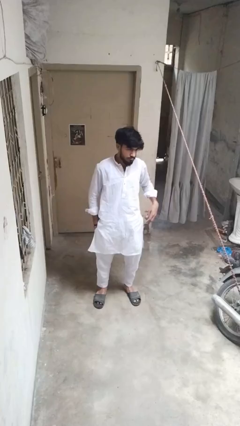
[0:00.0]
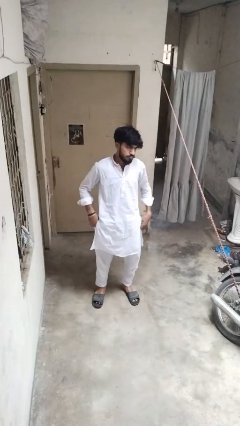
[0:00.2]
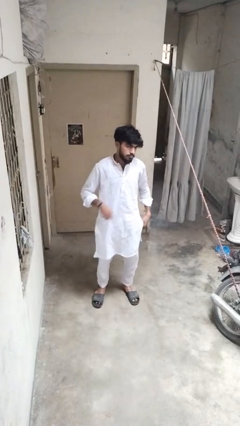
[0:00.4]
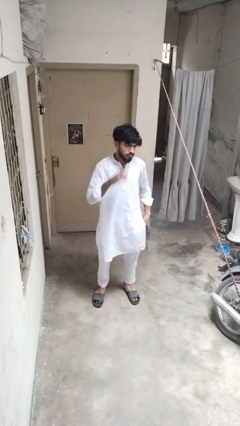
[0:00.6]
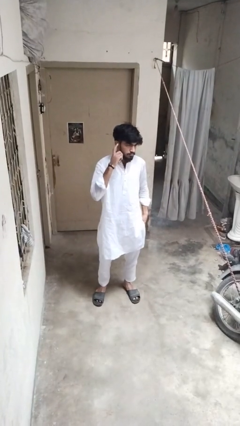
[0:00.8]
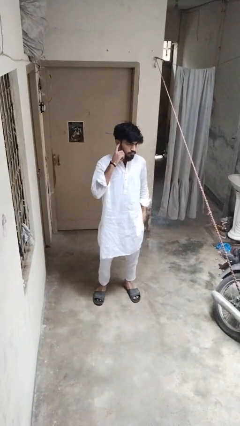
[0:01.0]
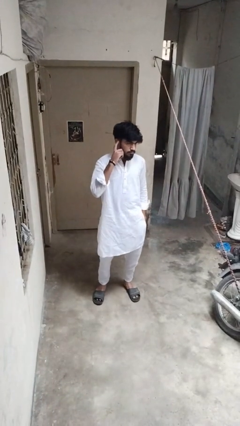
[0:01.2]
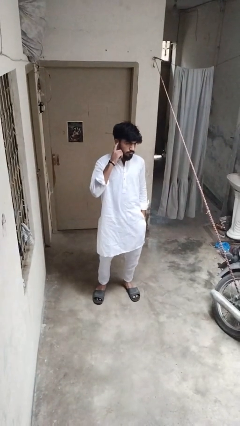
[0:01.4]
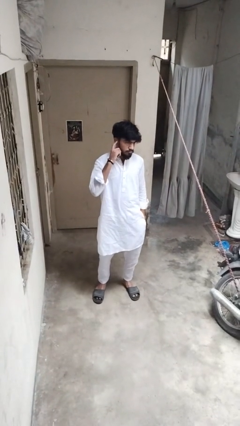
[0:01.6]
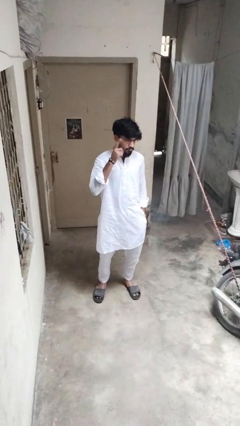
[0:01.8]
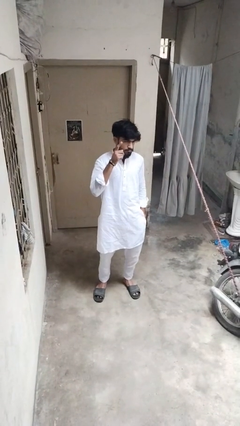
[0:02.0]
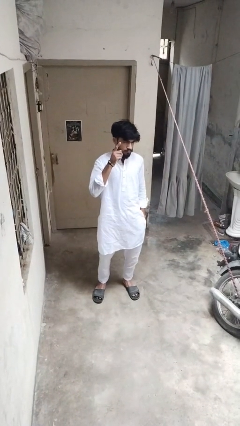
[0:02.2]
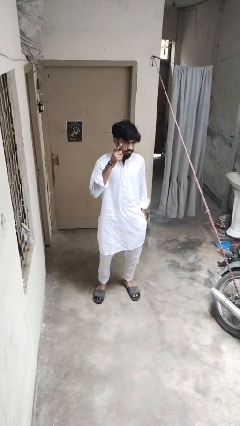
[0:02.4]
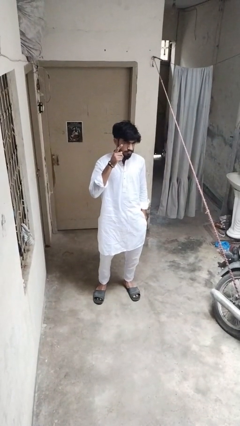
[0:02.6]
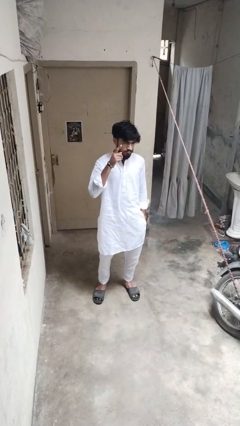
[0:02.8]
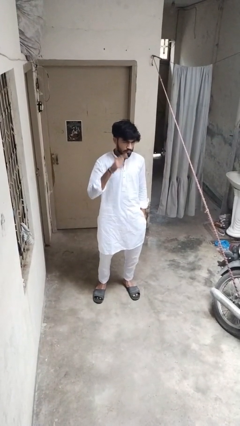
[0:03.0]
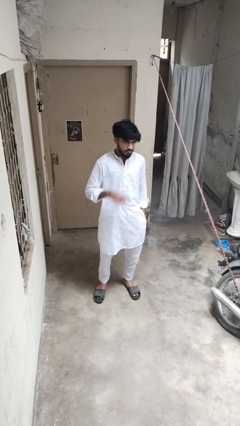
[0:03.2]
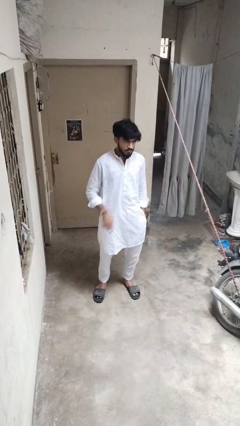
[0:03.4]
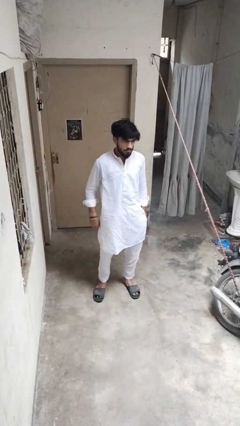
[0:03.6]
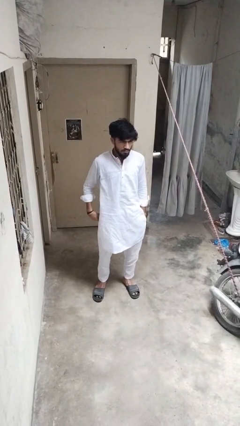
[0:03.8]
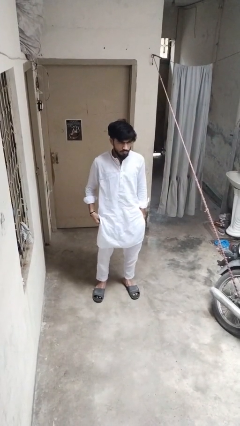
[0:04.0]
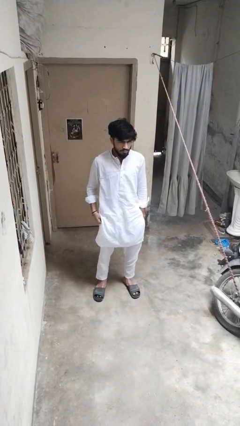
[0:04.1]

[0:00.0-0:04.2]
person gestures listen closely

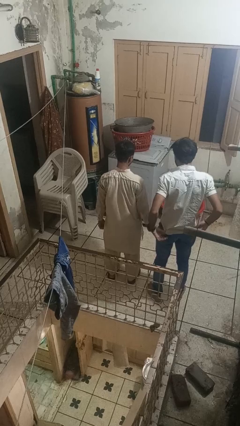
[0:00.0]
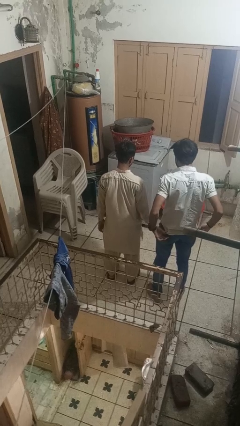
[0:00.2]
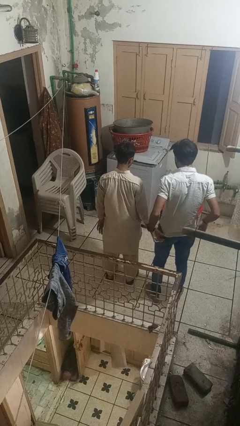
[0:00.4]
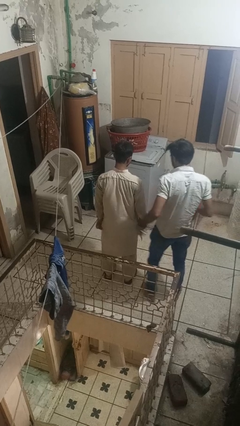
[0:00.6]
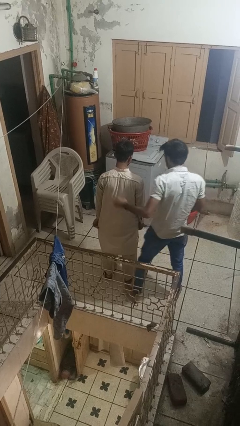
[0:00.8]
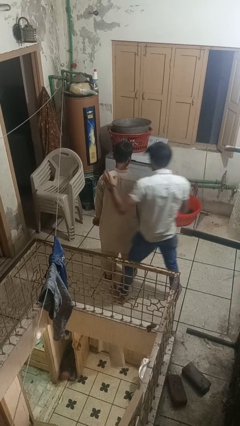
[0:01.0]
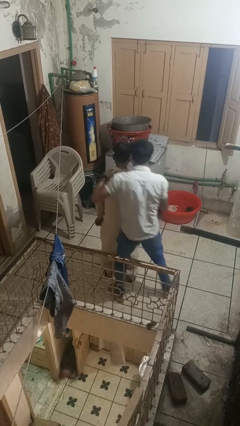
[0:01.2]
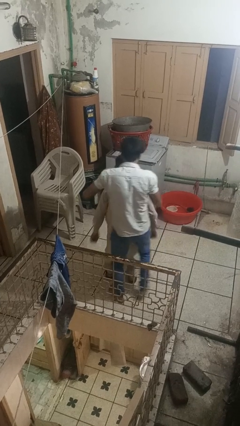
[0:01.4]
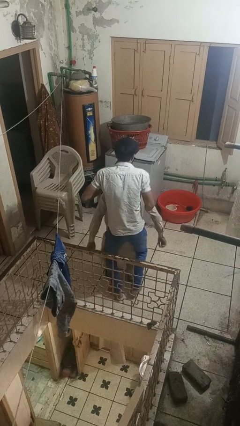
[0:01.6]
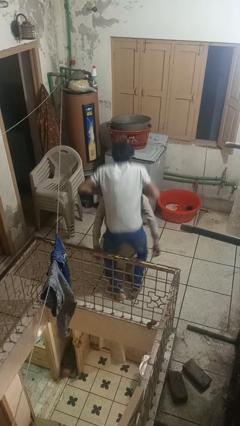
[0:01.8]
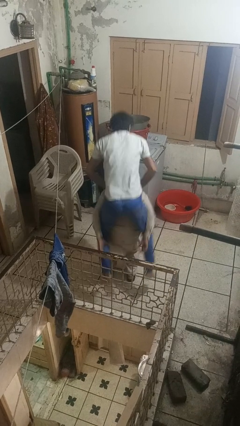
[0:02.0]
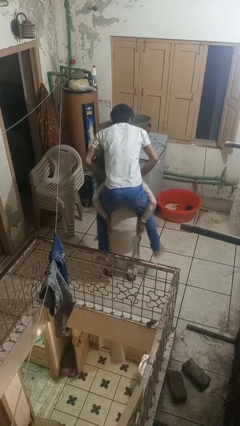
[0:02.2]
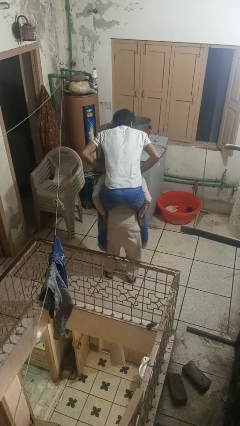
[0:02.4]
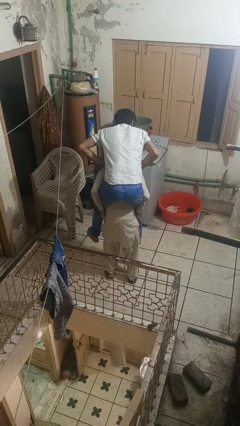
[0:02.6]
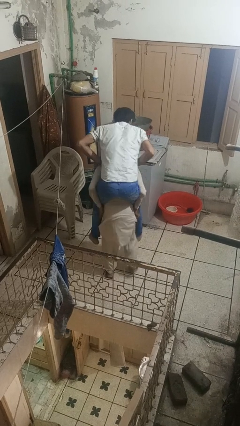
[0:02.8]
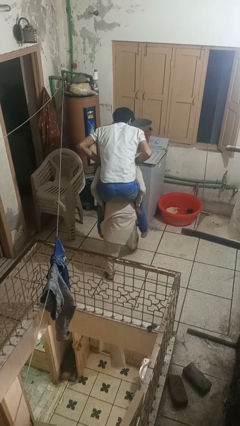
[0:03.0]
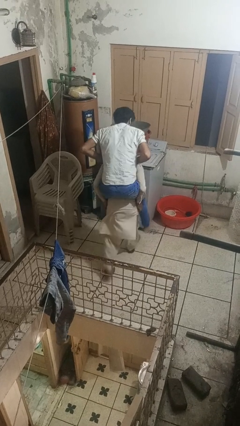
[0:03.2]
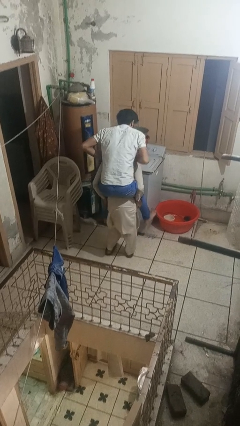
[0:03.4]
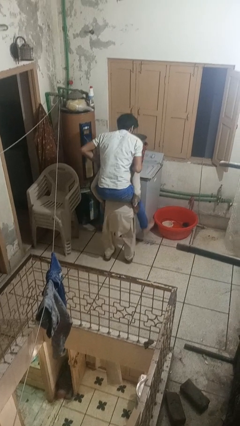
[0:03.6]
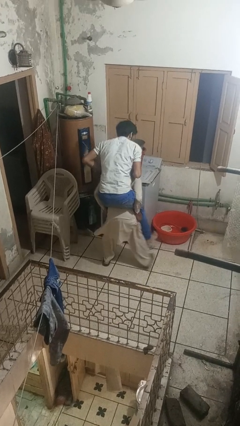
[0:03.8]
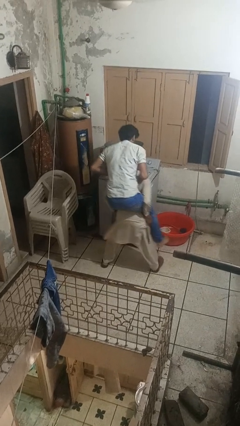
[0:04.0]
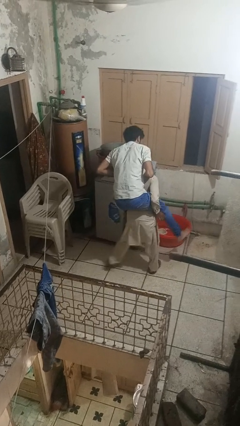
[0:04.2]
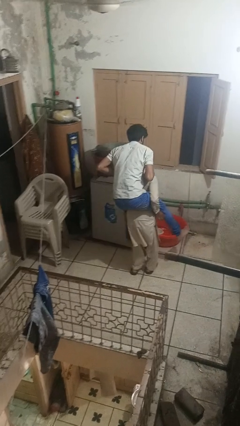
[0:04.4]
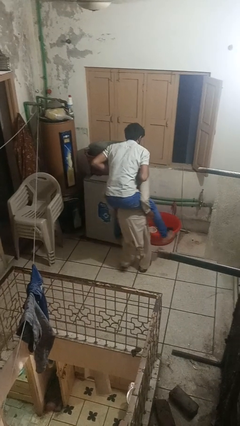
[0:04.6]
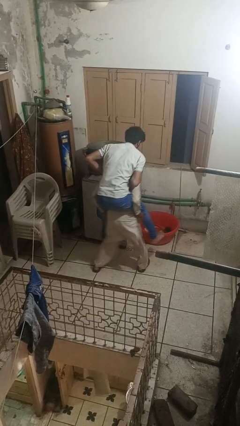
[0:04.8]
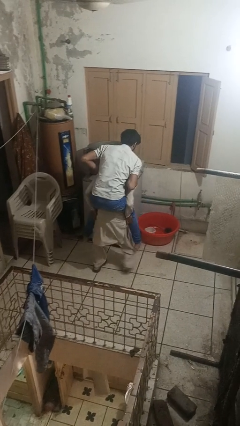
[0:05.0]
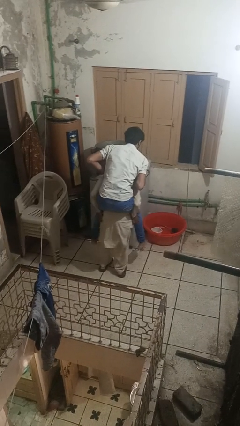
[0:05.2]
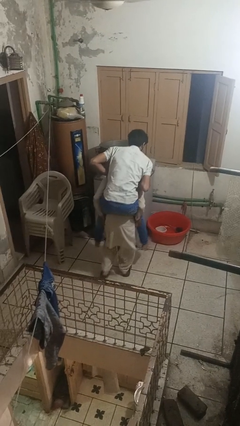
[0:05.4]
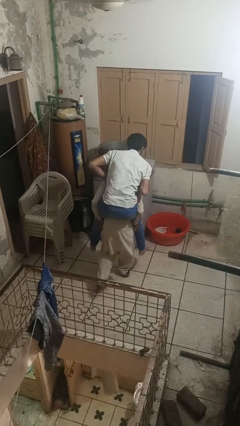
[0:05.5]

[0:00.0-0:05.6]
person carries person on back

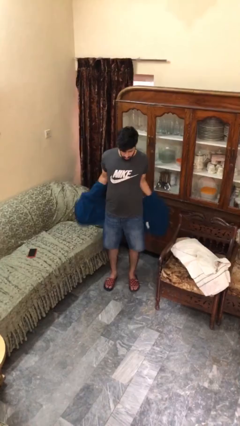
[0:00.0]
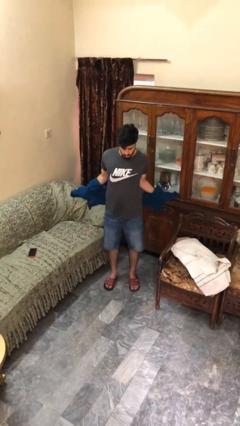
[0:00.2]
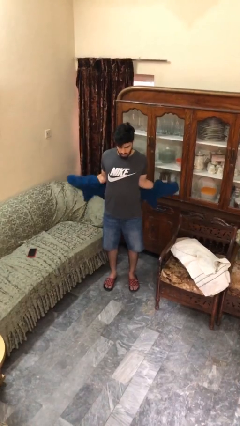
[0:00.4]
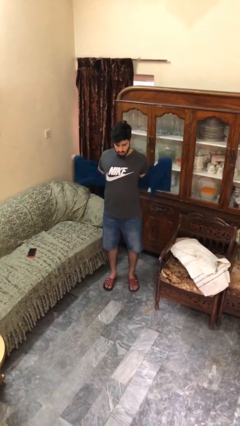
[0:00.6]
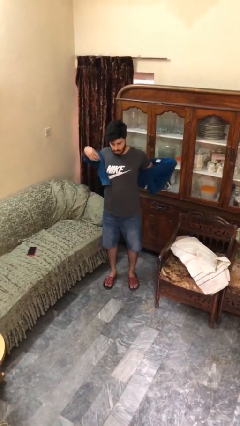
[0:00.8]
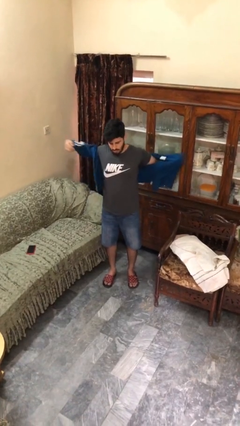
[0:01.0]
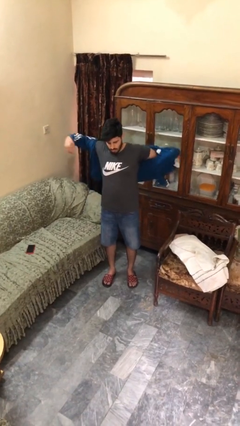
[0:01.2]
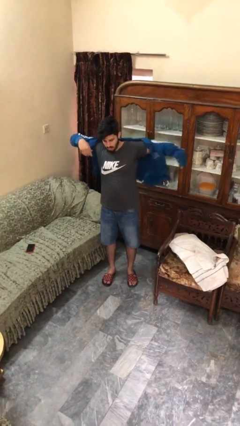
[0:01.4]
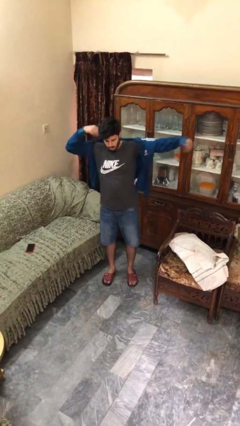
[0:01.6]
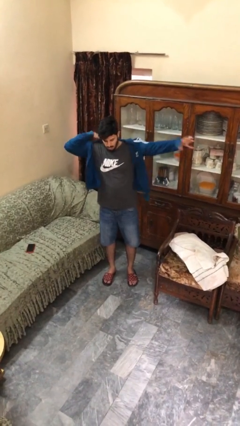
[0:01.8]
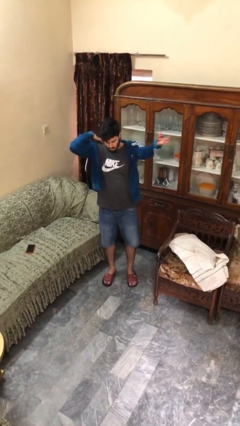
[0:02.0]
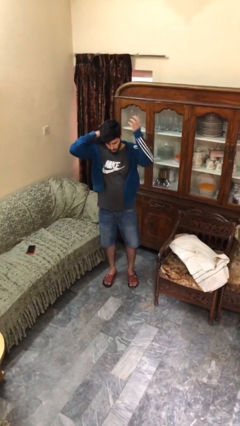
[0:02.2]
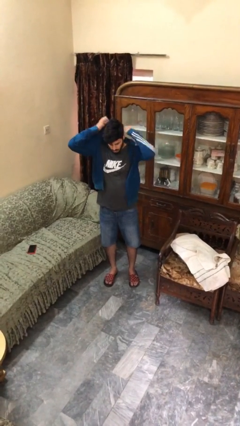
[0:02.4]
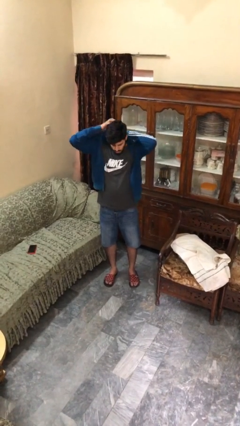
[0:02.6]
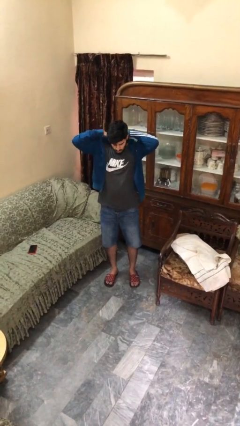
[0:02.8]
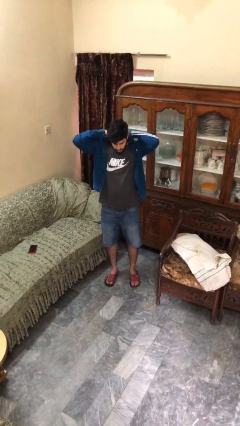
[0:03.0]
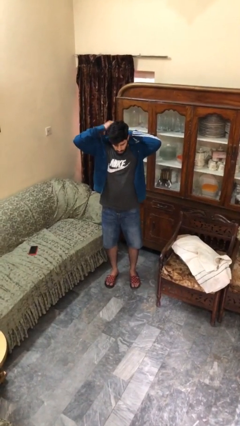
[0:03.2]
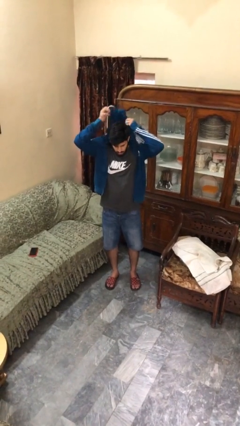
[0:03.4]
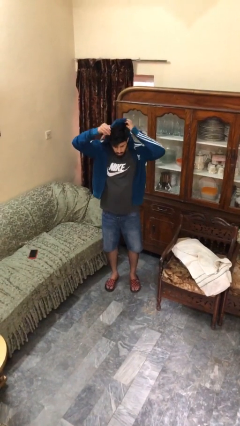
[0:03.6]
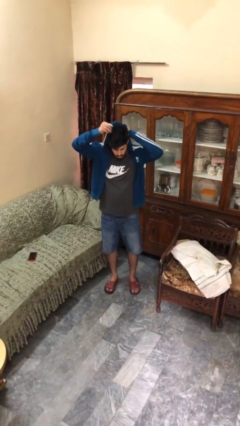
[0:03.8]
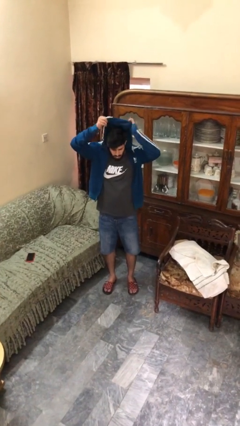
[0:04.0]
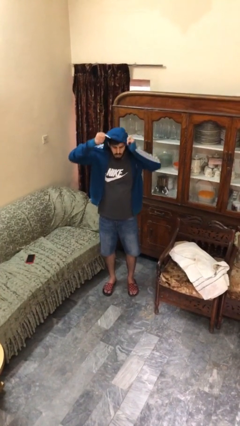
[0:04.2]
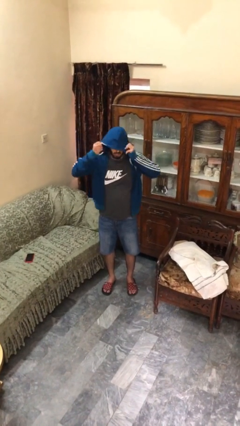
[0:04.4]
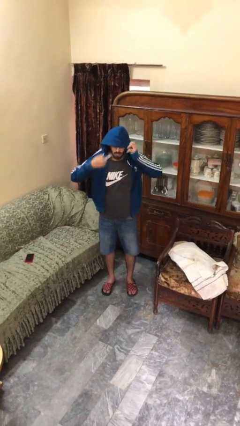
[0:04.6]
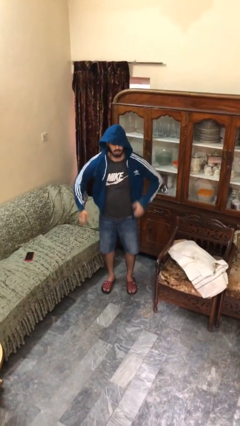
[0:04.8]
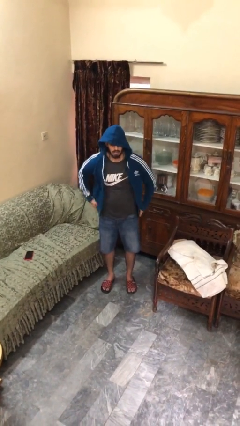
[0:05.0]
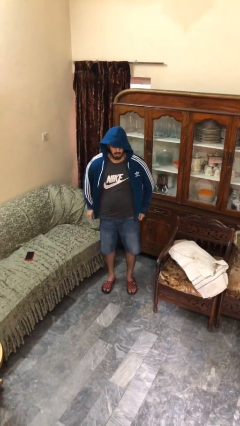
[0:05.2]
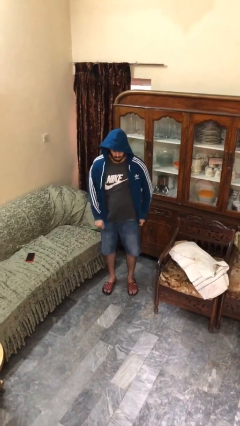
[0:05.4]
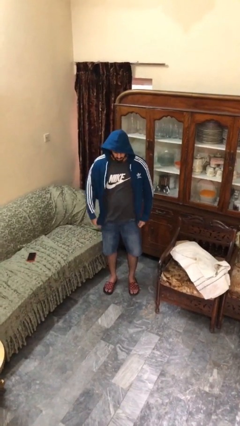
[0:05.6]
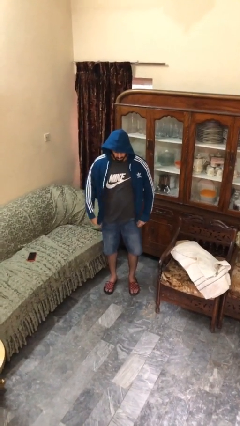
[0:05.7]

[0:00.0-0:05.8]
person puts on hoodie

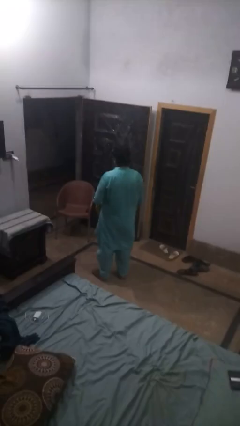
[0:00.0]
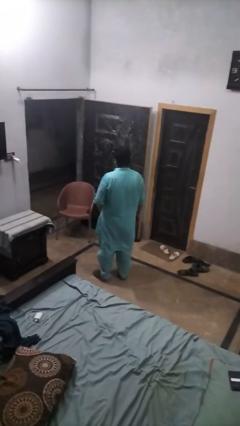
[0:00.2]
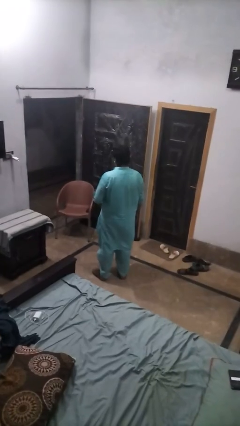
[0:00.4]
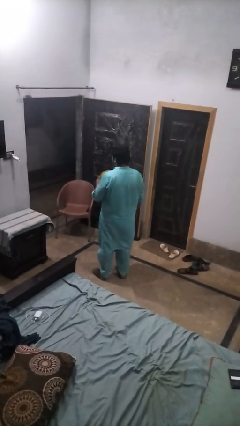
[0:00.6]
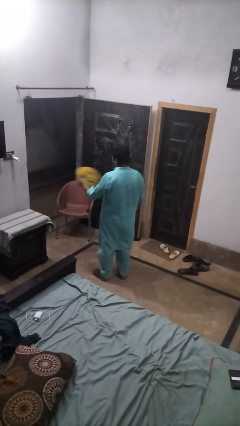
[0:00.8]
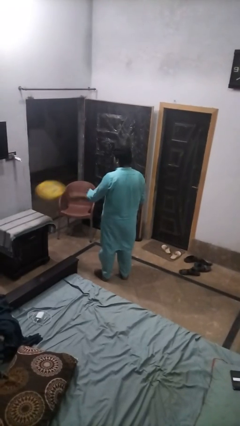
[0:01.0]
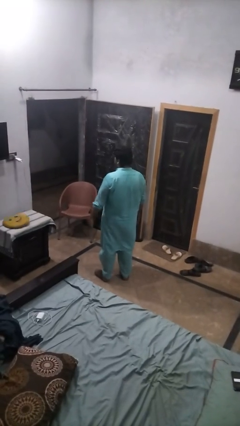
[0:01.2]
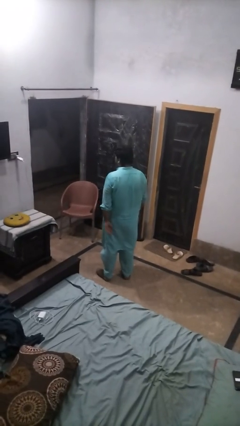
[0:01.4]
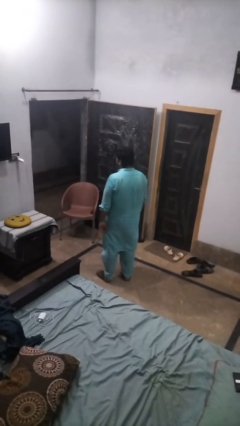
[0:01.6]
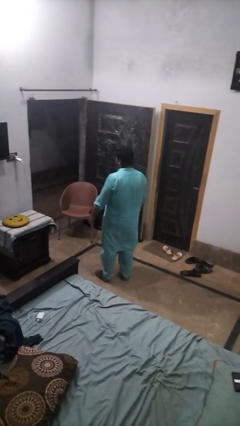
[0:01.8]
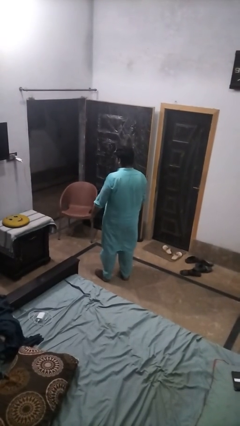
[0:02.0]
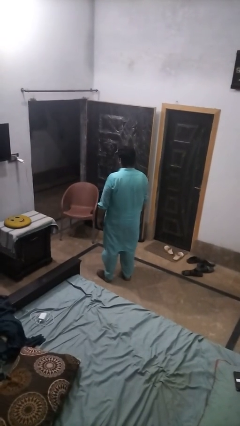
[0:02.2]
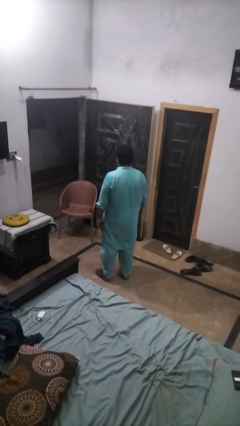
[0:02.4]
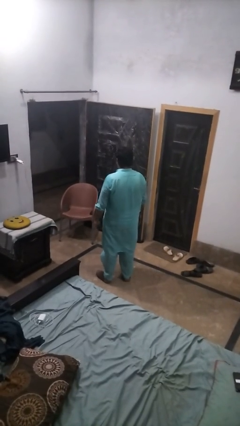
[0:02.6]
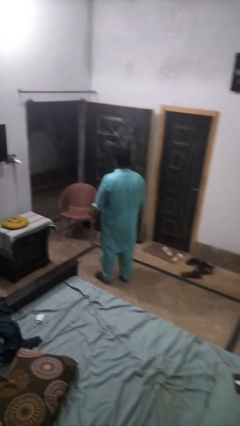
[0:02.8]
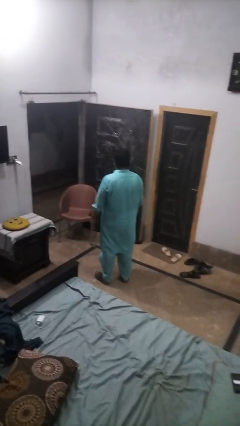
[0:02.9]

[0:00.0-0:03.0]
person throws object on table
